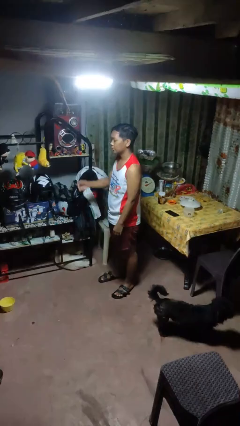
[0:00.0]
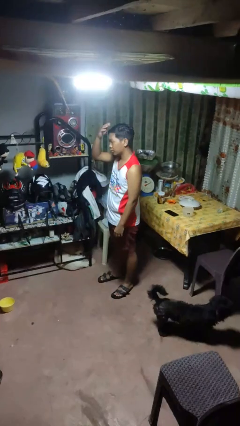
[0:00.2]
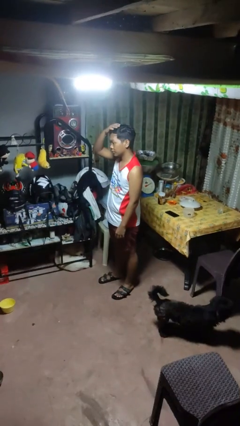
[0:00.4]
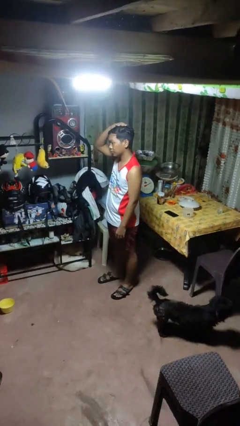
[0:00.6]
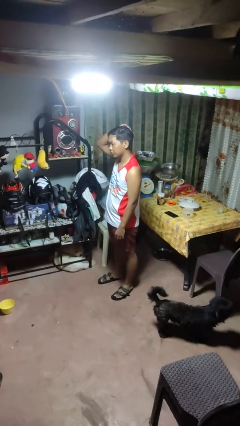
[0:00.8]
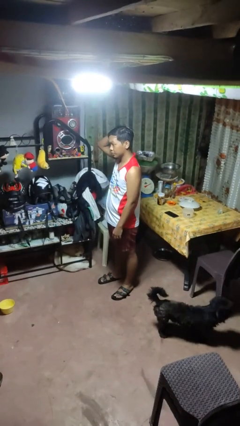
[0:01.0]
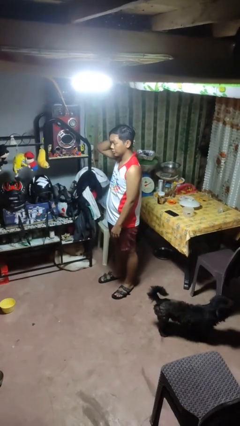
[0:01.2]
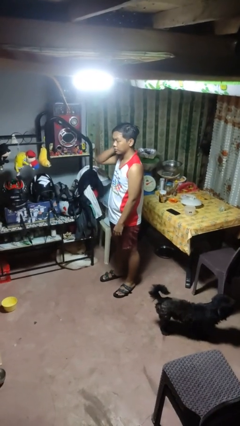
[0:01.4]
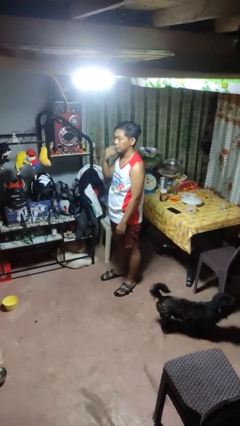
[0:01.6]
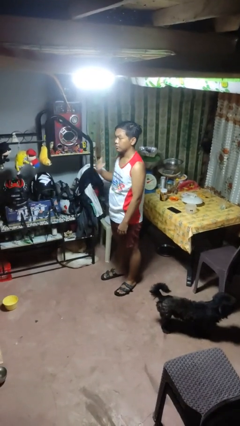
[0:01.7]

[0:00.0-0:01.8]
person pats head

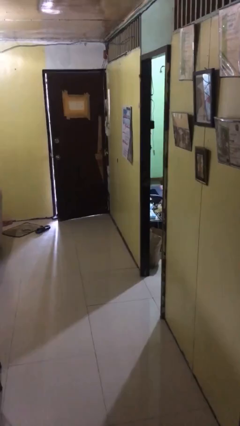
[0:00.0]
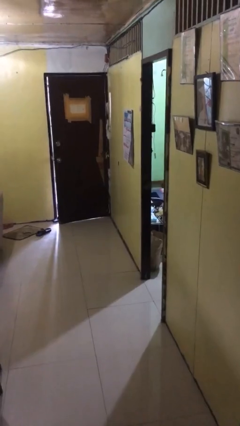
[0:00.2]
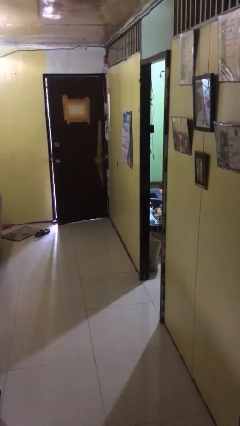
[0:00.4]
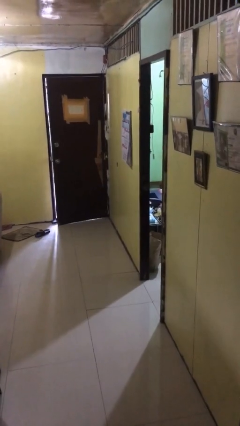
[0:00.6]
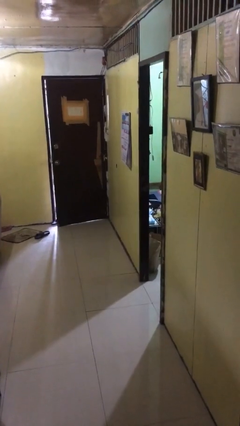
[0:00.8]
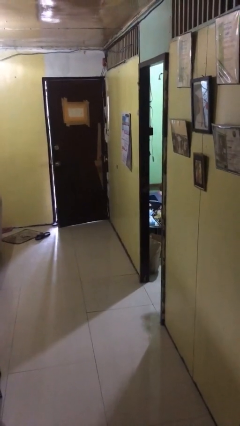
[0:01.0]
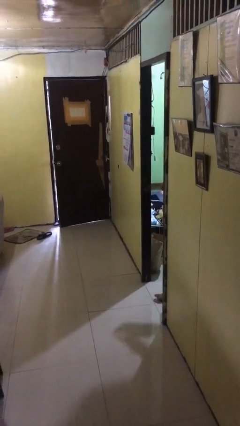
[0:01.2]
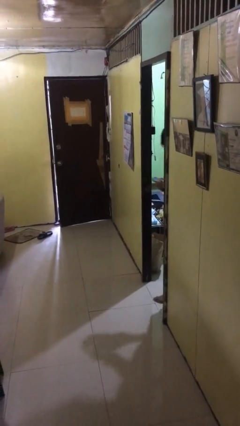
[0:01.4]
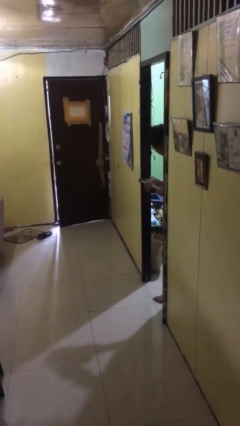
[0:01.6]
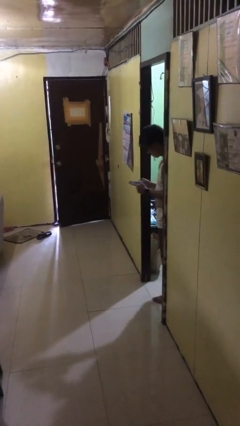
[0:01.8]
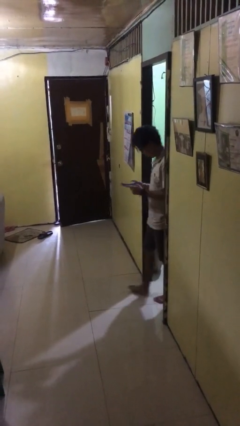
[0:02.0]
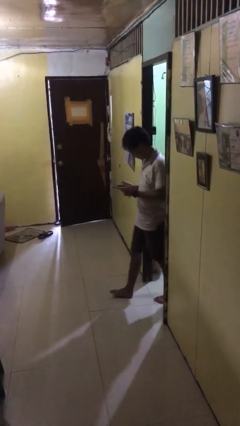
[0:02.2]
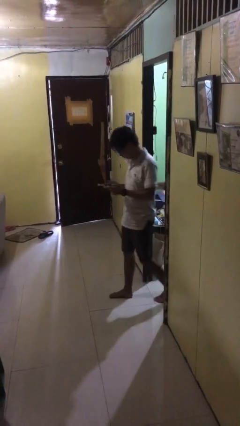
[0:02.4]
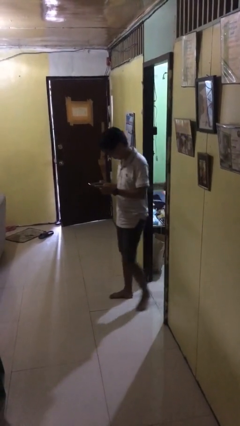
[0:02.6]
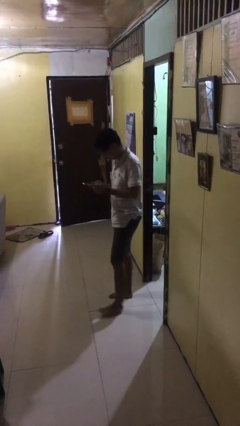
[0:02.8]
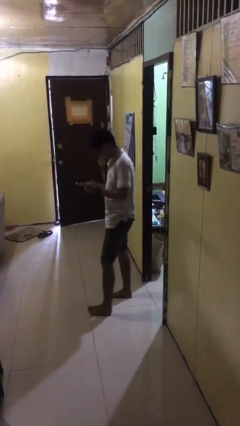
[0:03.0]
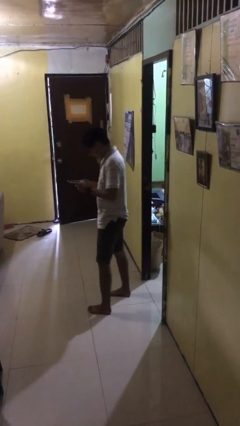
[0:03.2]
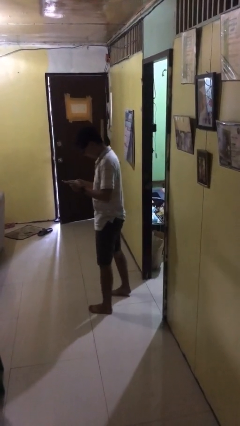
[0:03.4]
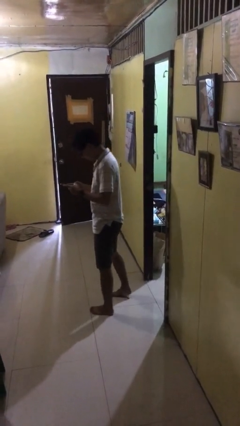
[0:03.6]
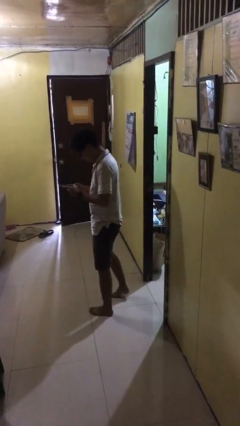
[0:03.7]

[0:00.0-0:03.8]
person enters scene through structure

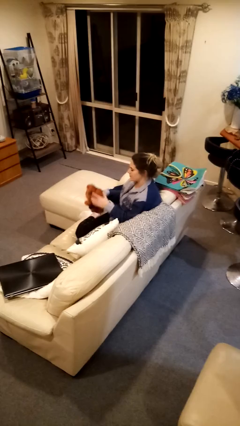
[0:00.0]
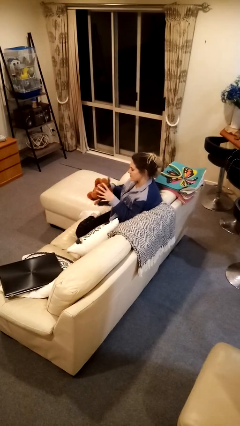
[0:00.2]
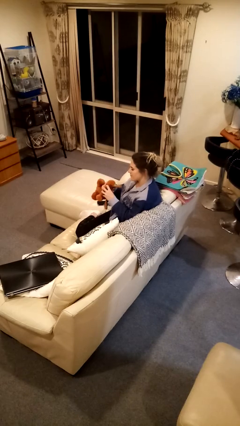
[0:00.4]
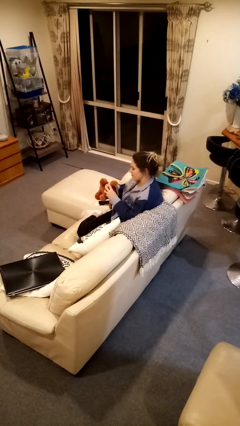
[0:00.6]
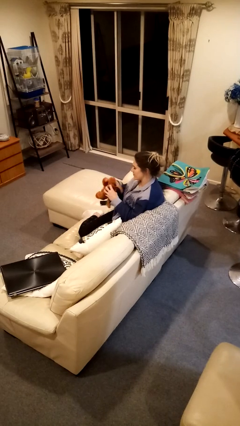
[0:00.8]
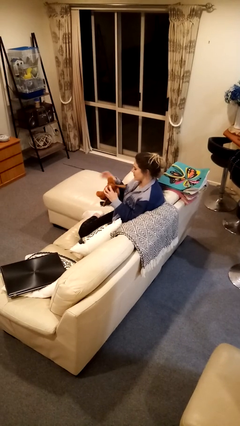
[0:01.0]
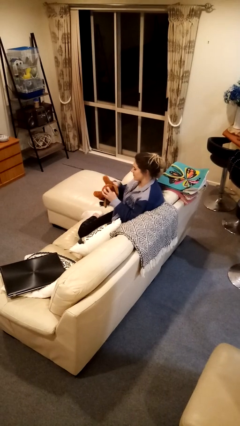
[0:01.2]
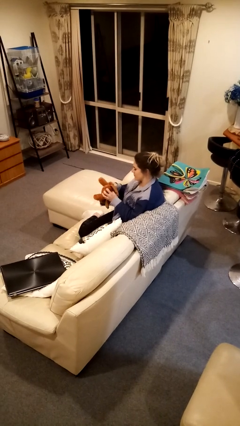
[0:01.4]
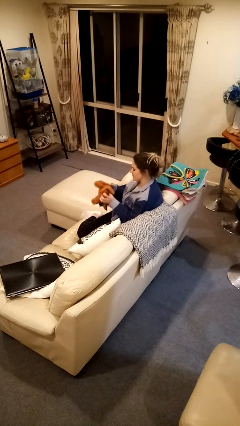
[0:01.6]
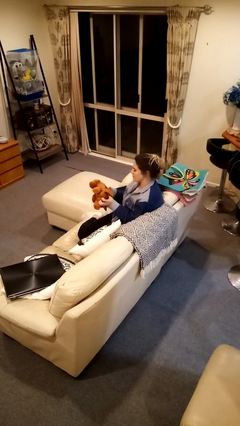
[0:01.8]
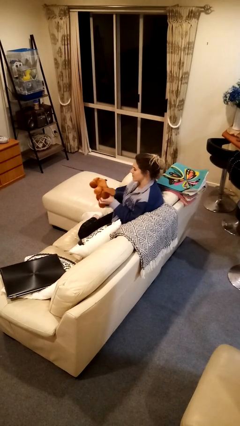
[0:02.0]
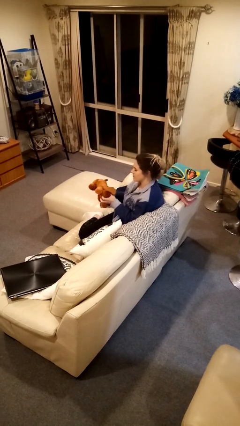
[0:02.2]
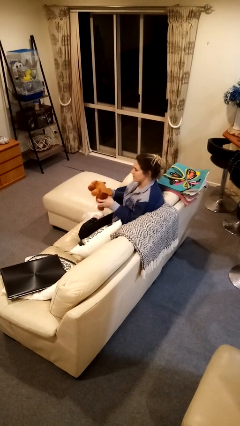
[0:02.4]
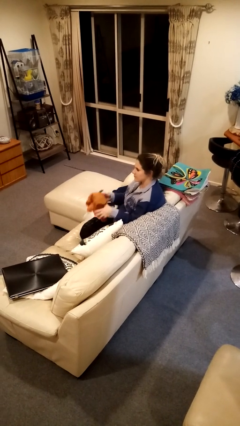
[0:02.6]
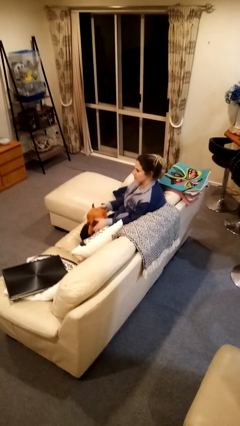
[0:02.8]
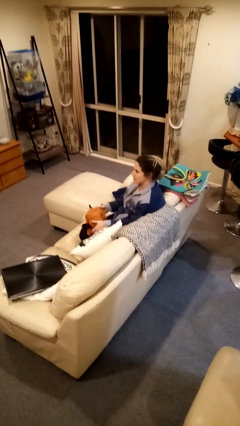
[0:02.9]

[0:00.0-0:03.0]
person squeezes object

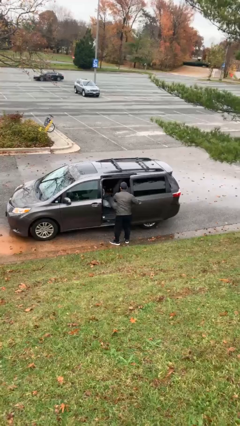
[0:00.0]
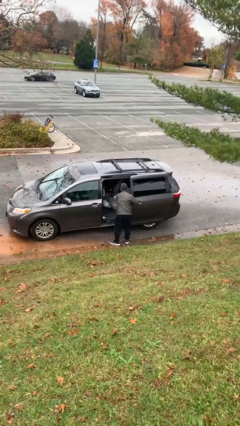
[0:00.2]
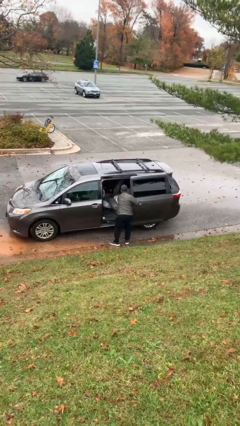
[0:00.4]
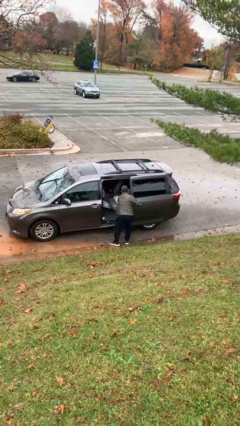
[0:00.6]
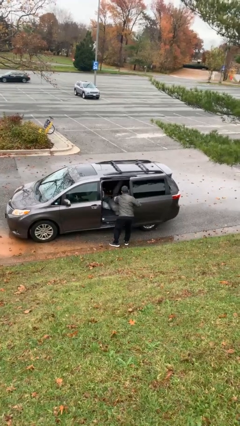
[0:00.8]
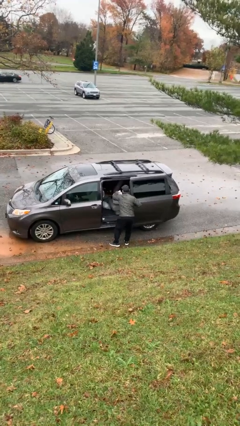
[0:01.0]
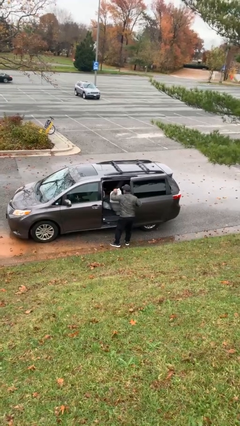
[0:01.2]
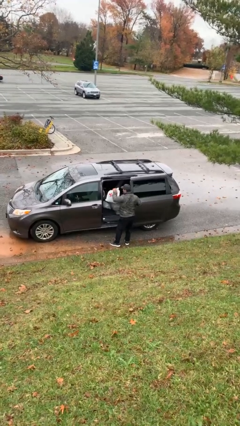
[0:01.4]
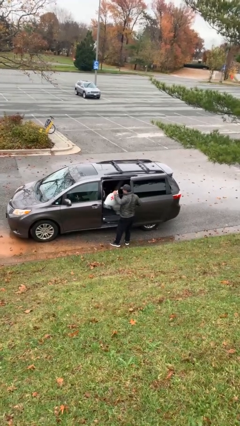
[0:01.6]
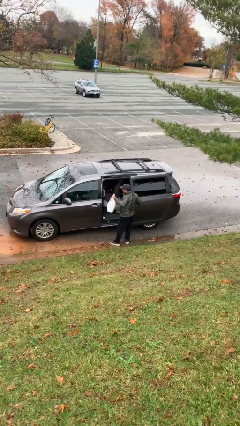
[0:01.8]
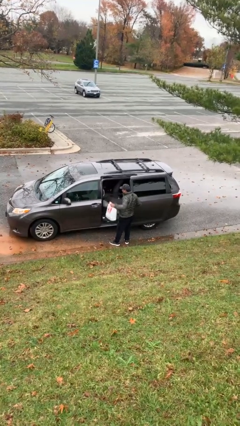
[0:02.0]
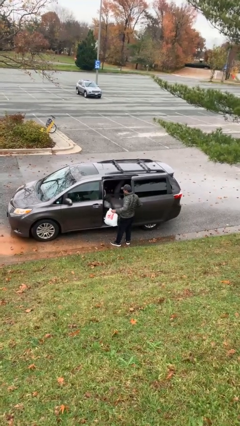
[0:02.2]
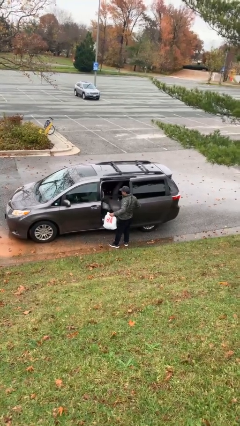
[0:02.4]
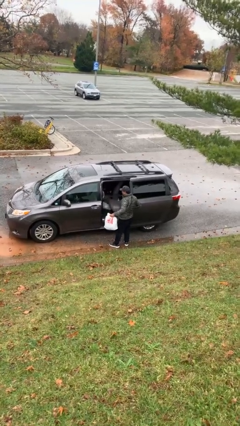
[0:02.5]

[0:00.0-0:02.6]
person unloads car

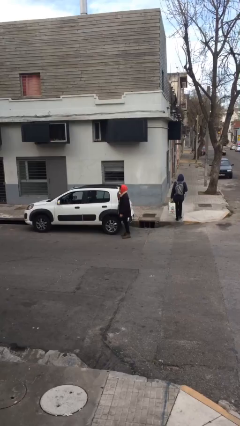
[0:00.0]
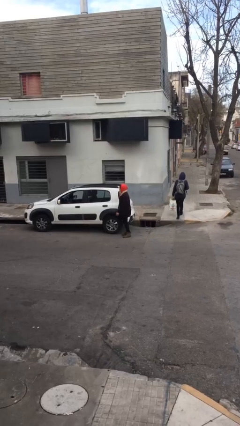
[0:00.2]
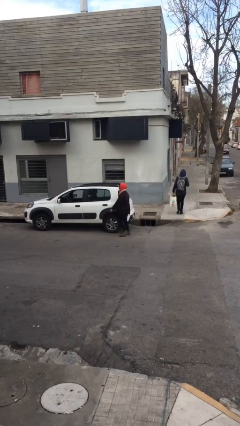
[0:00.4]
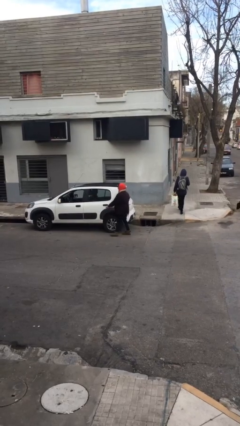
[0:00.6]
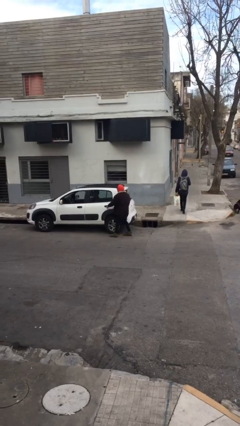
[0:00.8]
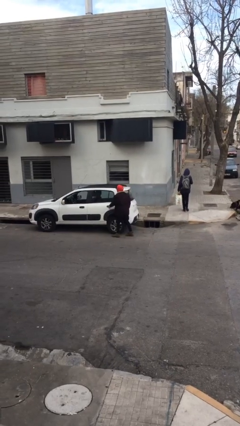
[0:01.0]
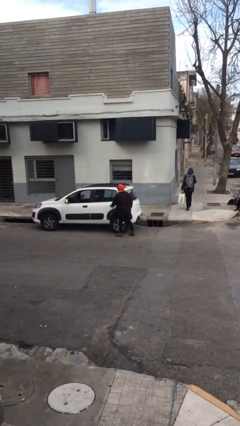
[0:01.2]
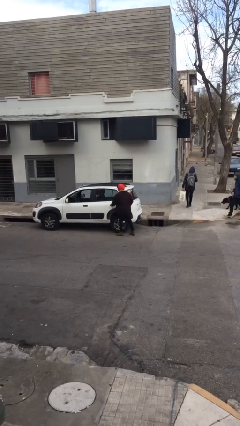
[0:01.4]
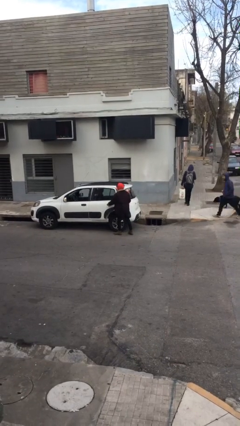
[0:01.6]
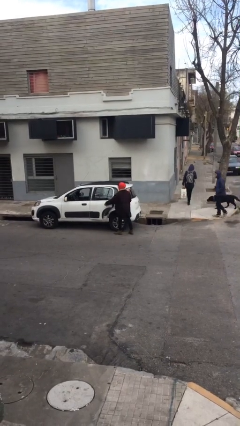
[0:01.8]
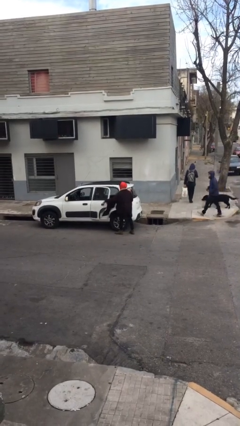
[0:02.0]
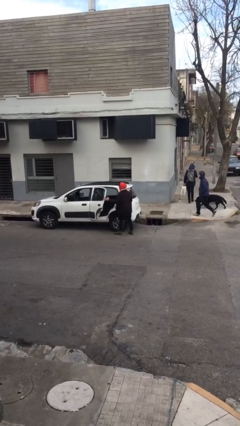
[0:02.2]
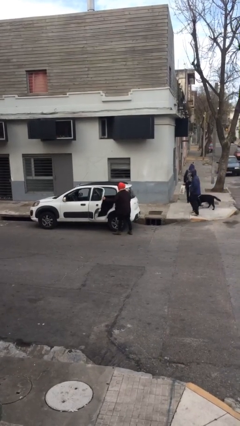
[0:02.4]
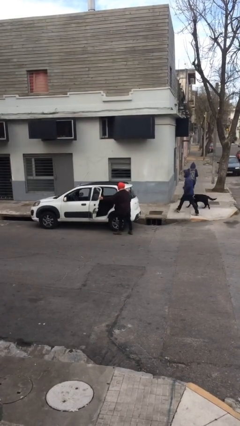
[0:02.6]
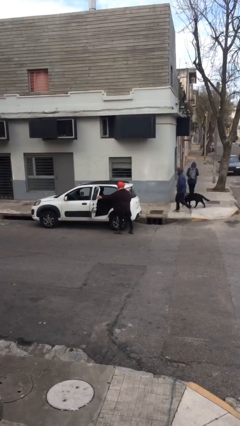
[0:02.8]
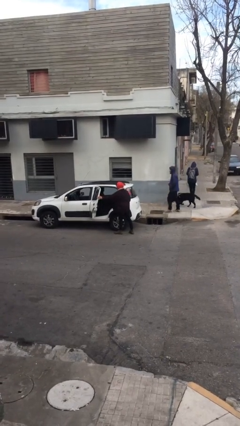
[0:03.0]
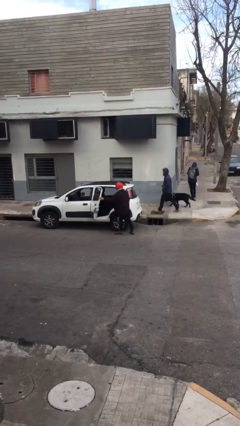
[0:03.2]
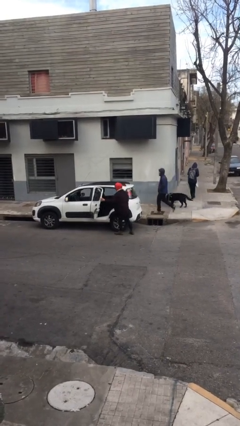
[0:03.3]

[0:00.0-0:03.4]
person opens car door

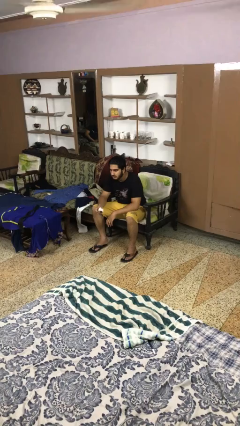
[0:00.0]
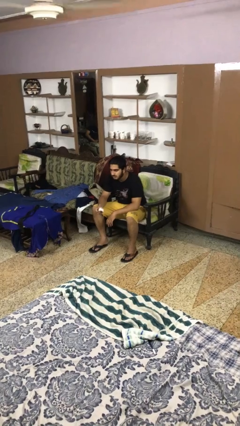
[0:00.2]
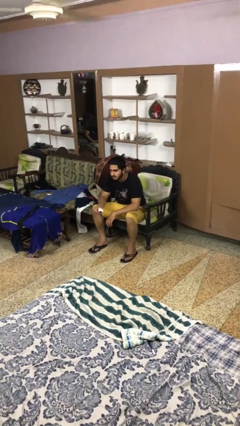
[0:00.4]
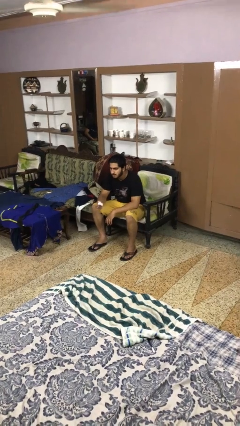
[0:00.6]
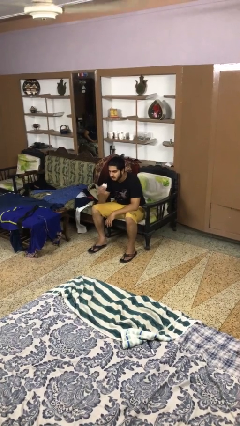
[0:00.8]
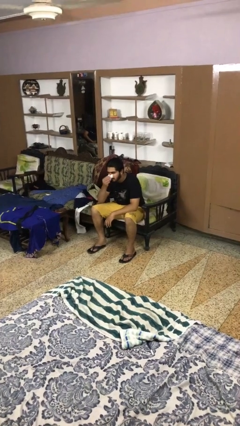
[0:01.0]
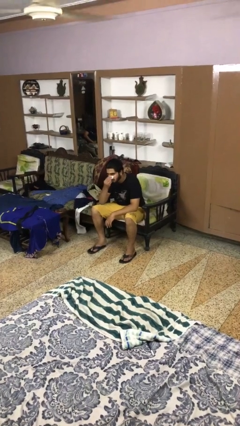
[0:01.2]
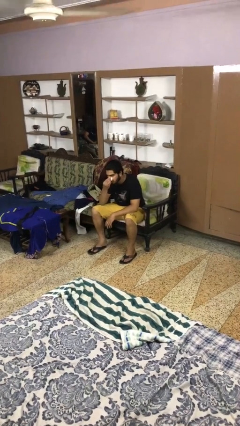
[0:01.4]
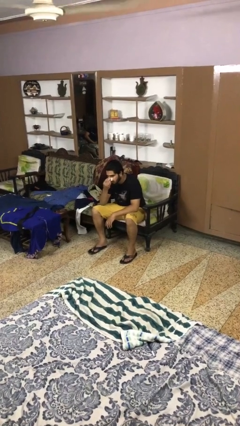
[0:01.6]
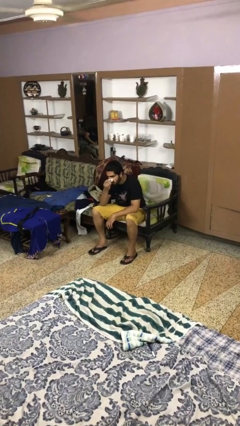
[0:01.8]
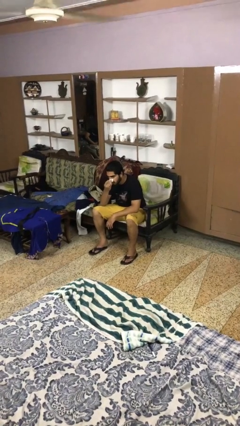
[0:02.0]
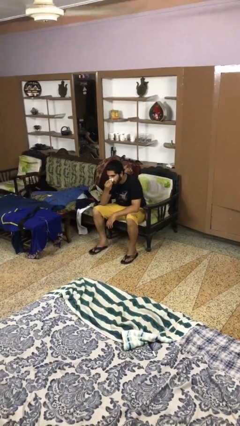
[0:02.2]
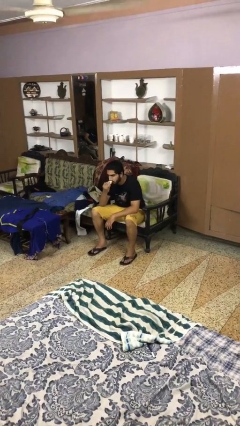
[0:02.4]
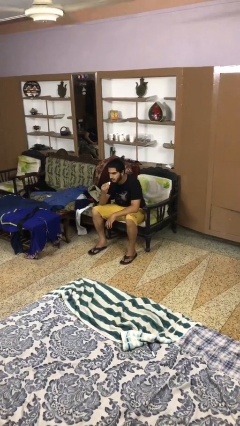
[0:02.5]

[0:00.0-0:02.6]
person blows nose

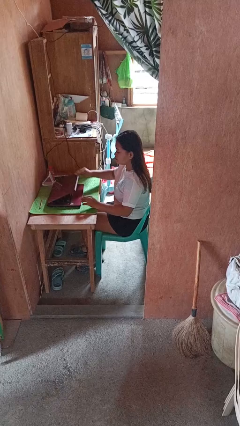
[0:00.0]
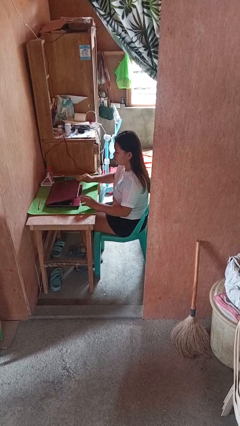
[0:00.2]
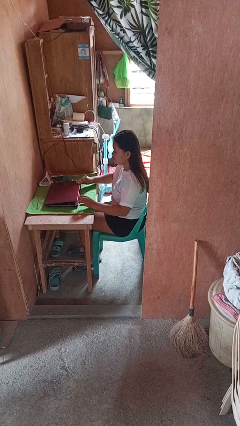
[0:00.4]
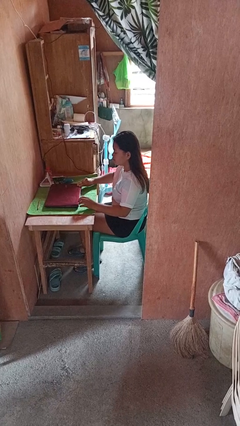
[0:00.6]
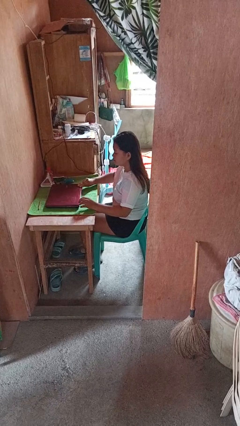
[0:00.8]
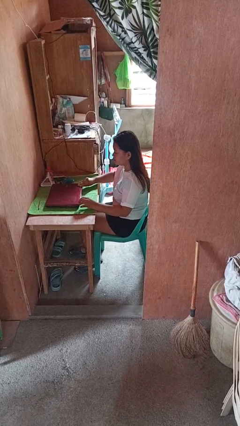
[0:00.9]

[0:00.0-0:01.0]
person closes laptop
